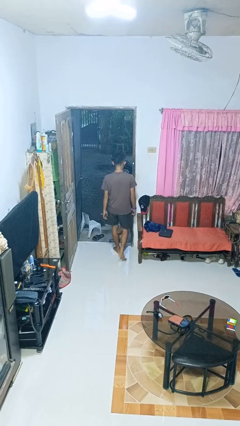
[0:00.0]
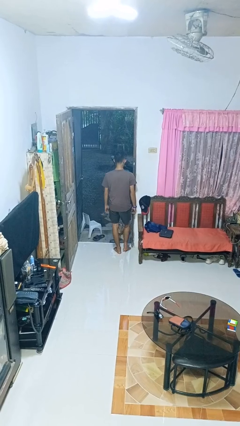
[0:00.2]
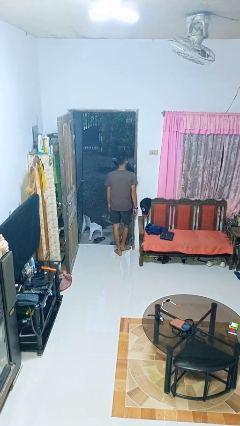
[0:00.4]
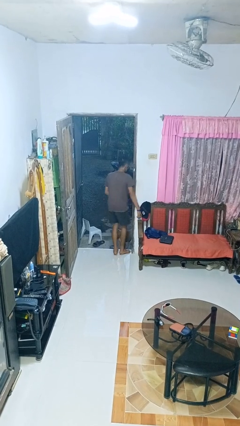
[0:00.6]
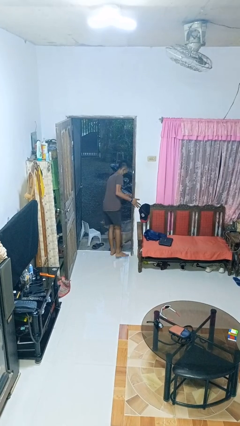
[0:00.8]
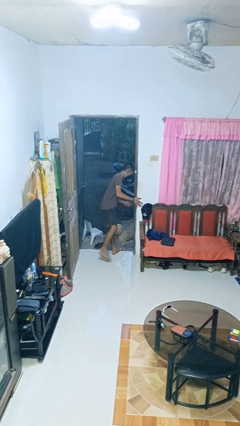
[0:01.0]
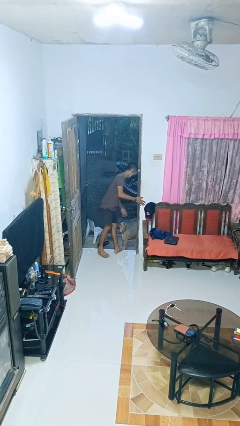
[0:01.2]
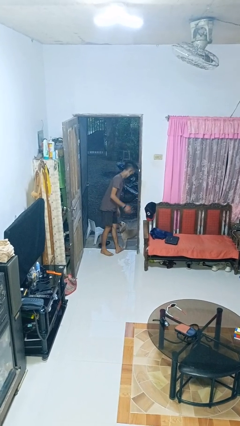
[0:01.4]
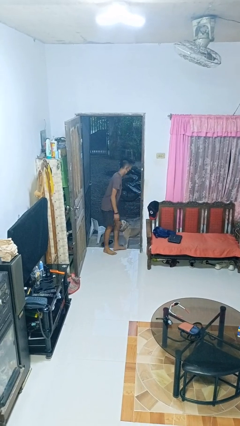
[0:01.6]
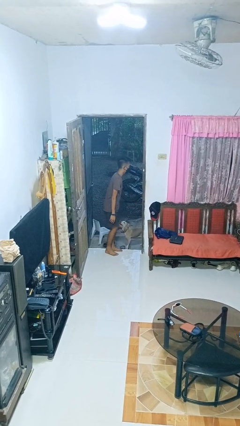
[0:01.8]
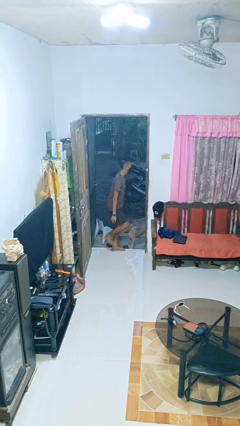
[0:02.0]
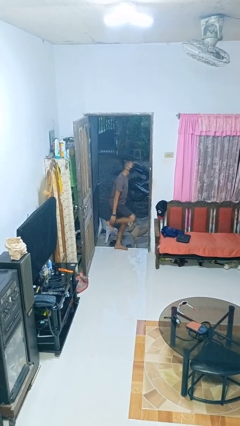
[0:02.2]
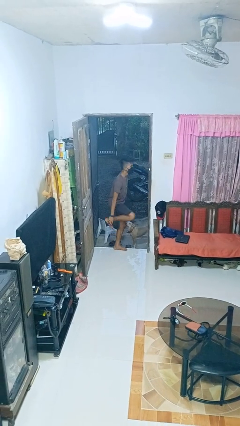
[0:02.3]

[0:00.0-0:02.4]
person bumps into wall

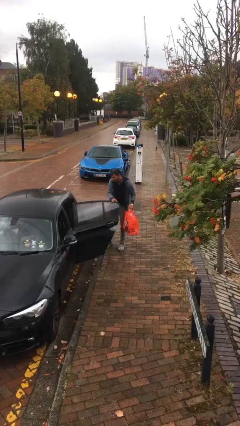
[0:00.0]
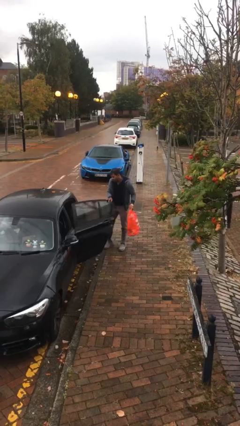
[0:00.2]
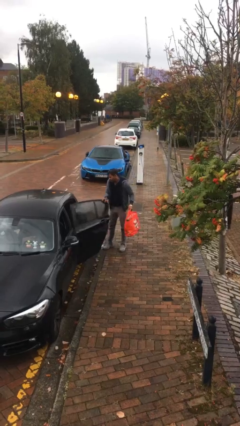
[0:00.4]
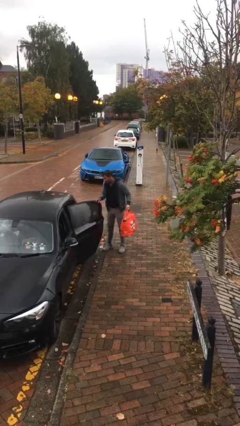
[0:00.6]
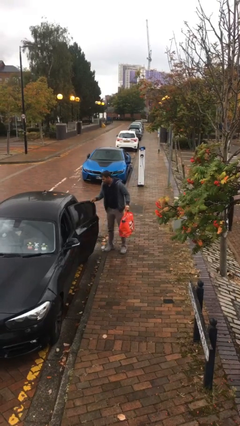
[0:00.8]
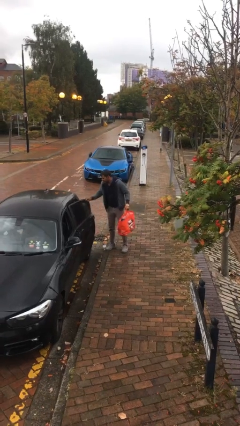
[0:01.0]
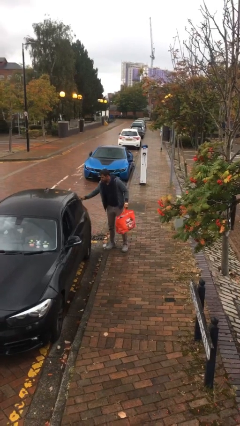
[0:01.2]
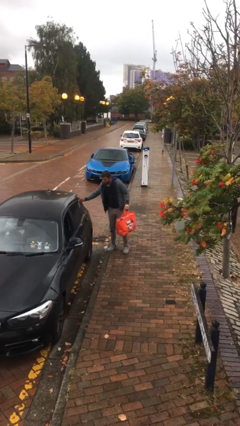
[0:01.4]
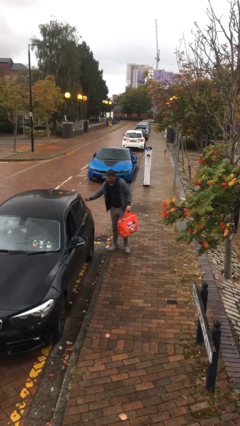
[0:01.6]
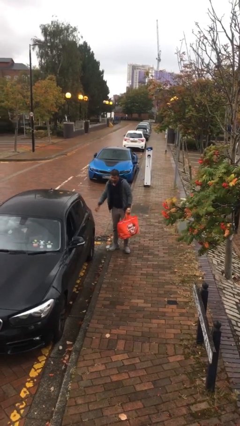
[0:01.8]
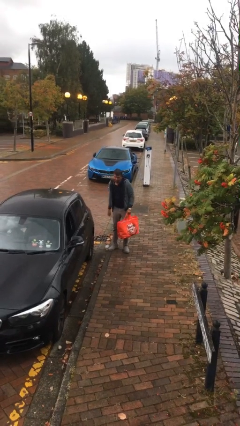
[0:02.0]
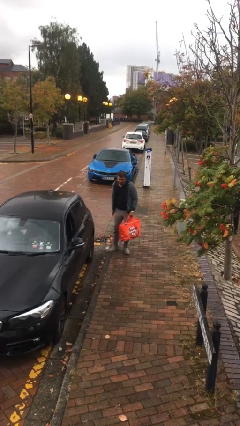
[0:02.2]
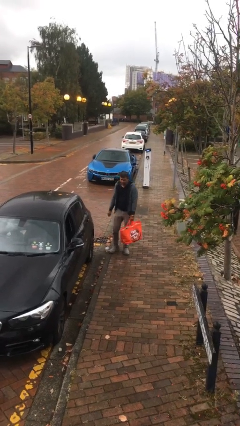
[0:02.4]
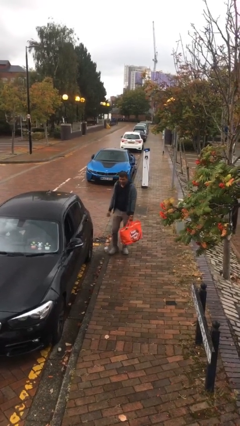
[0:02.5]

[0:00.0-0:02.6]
person closes car door

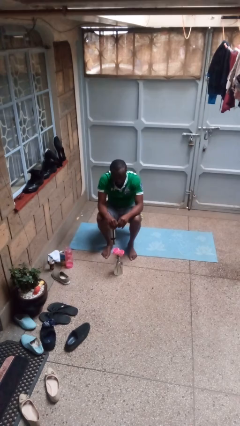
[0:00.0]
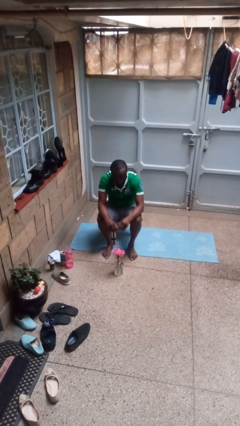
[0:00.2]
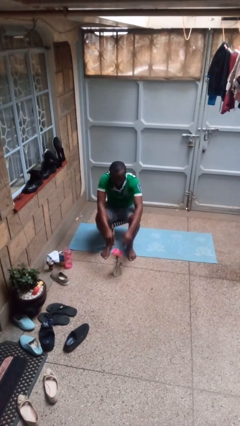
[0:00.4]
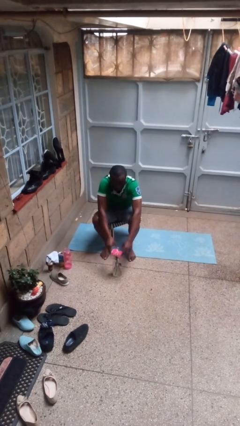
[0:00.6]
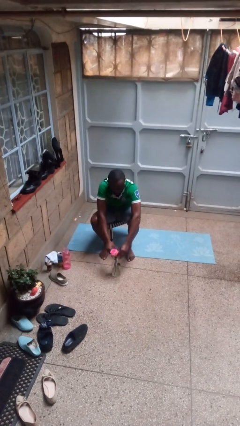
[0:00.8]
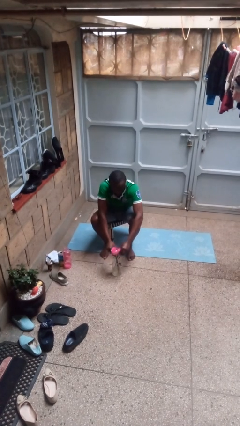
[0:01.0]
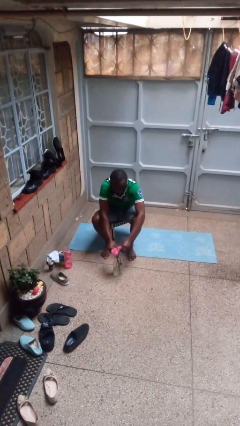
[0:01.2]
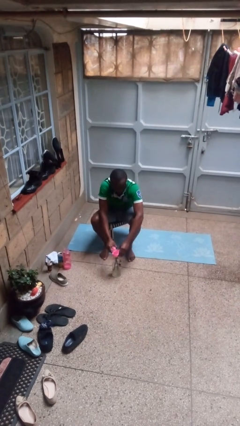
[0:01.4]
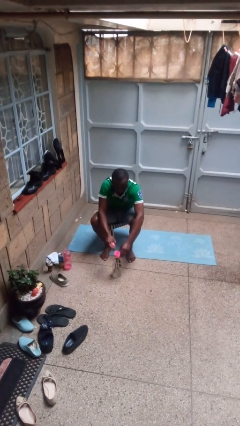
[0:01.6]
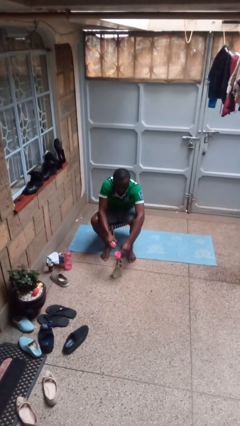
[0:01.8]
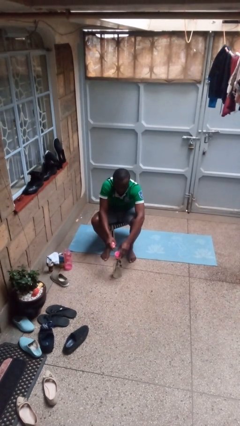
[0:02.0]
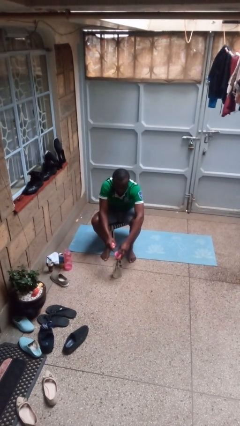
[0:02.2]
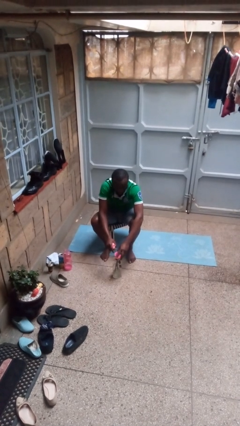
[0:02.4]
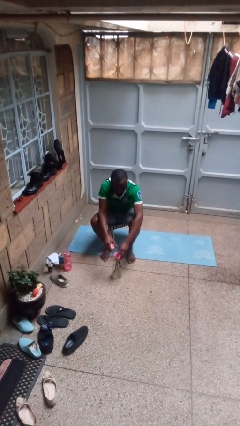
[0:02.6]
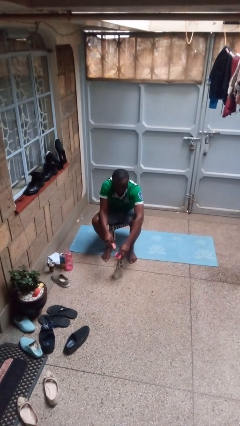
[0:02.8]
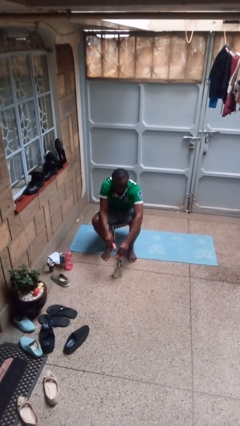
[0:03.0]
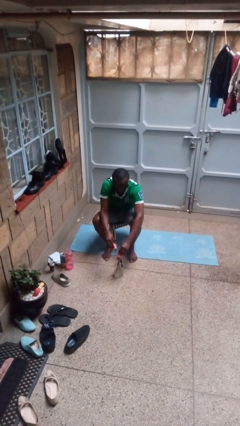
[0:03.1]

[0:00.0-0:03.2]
person arranges flowers in vase

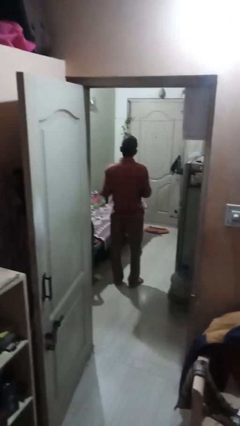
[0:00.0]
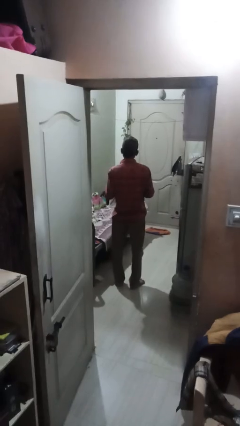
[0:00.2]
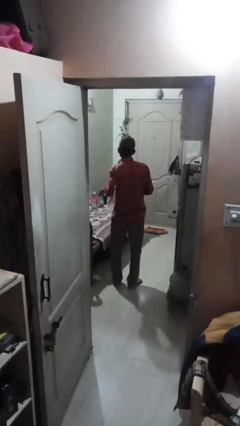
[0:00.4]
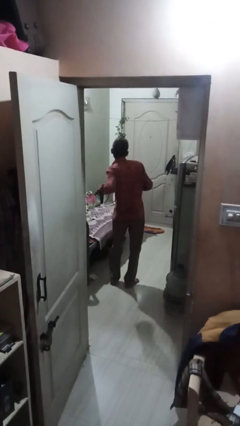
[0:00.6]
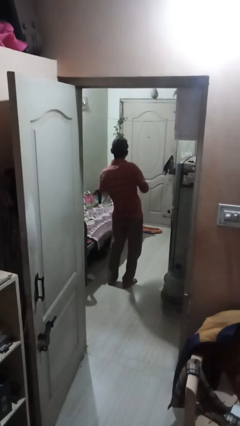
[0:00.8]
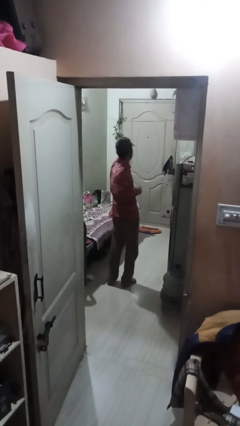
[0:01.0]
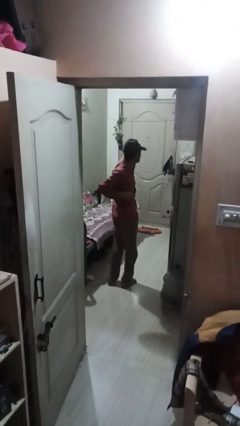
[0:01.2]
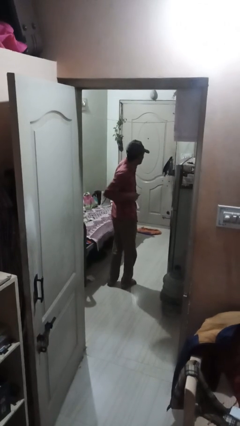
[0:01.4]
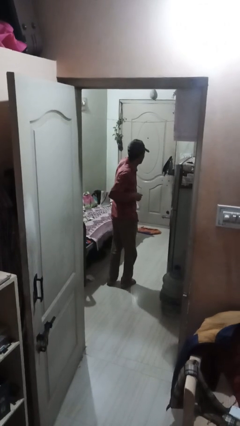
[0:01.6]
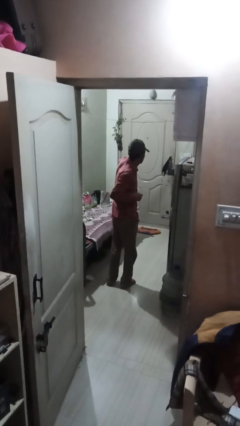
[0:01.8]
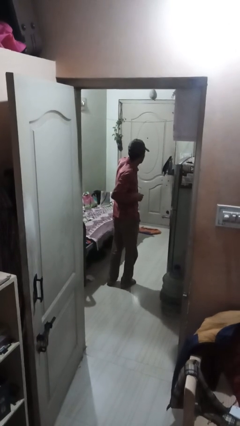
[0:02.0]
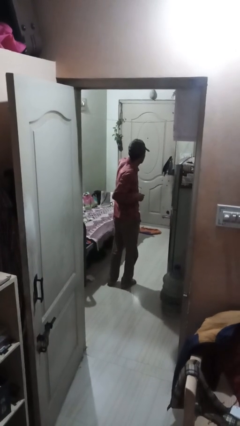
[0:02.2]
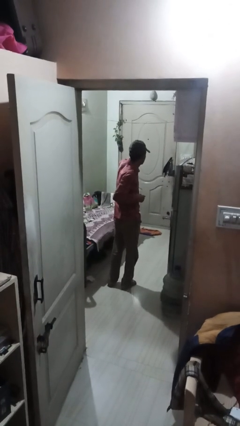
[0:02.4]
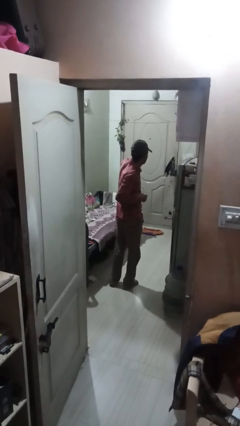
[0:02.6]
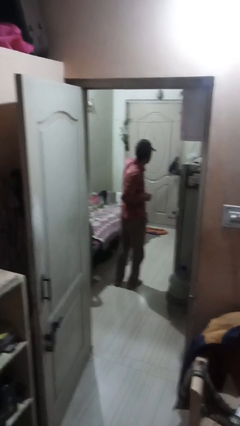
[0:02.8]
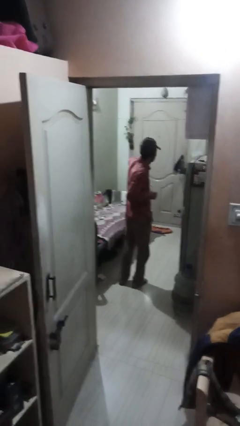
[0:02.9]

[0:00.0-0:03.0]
person punches

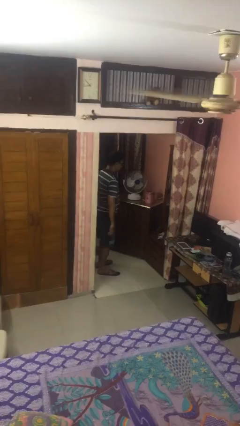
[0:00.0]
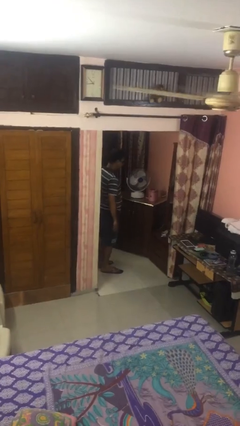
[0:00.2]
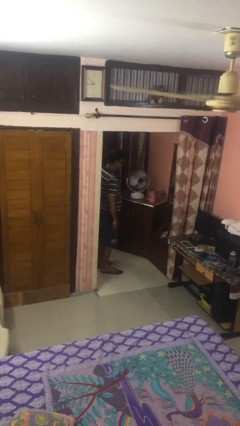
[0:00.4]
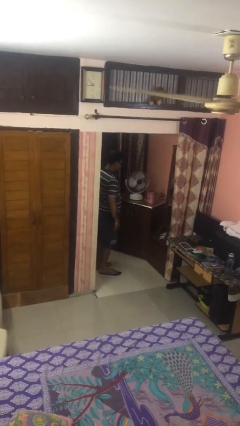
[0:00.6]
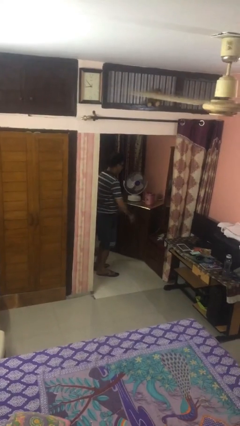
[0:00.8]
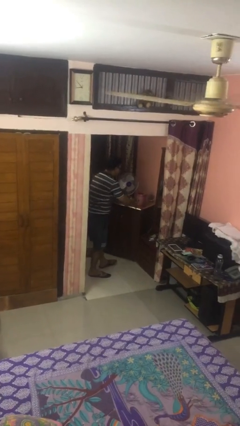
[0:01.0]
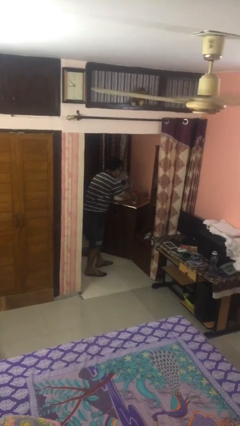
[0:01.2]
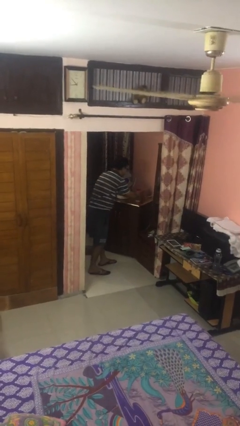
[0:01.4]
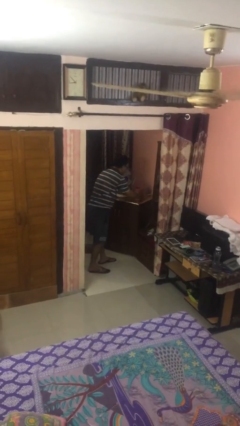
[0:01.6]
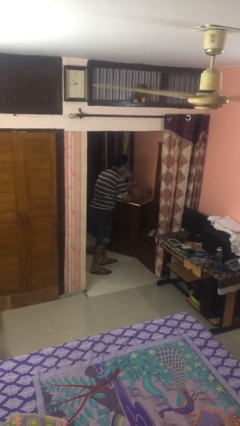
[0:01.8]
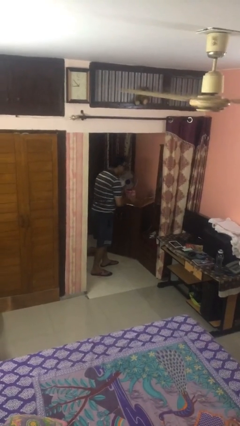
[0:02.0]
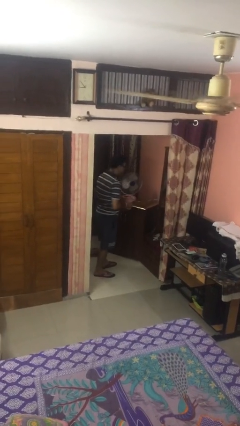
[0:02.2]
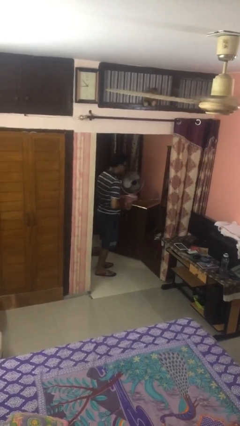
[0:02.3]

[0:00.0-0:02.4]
person picks up object from countertop

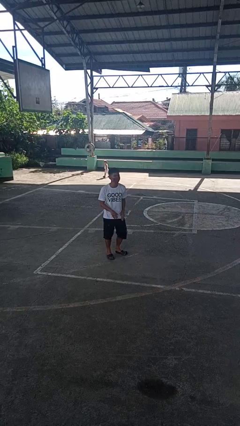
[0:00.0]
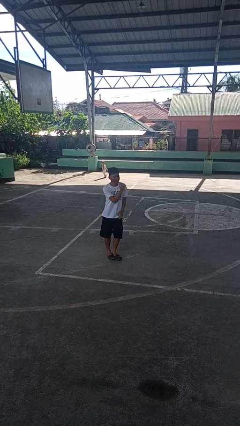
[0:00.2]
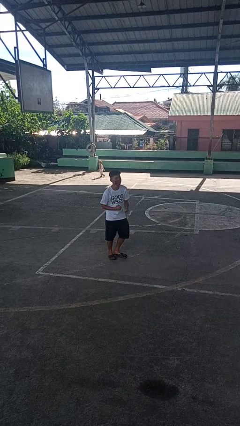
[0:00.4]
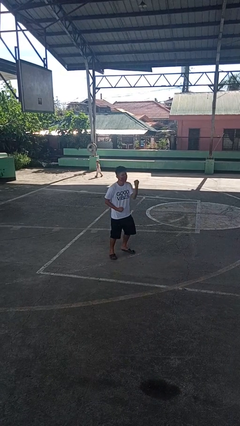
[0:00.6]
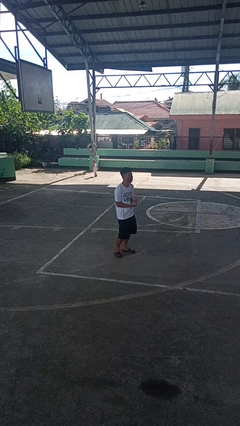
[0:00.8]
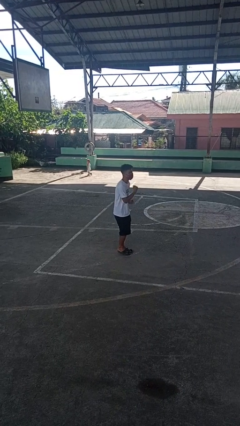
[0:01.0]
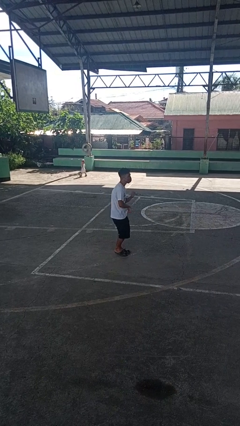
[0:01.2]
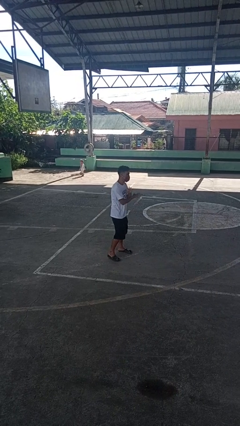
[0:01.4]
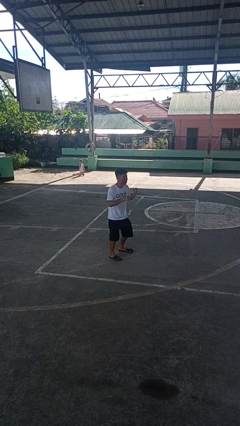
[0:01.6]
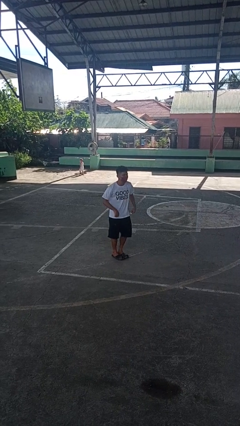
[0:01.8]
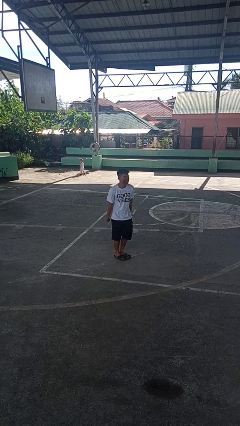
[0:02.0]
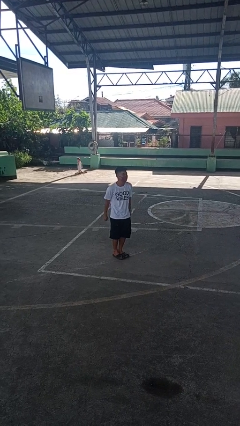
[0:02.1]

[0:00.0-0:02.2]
person dances in place

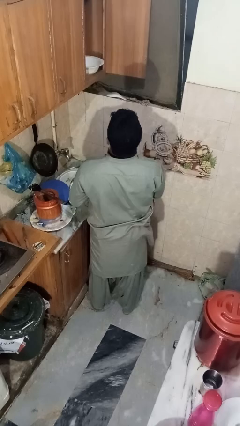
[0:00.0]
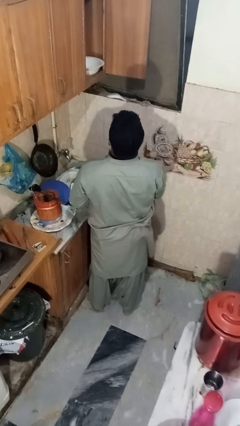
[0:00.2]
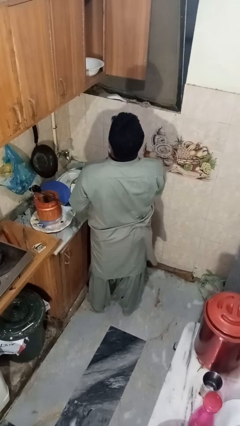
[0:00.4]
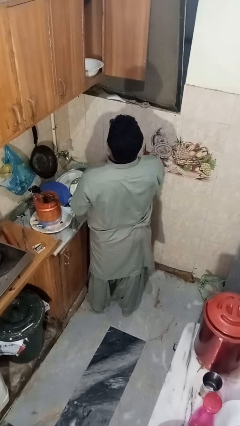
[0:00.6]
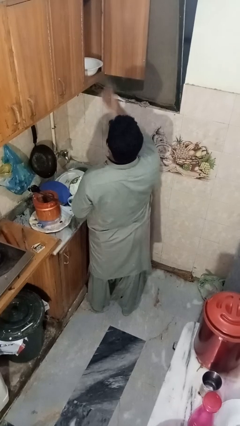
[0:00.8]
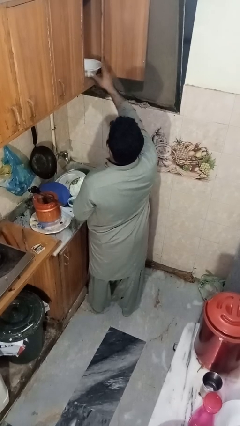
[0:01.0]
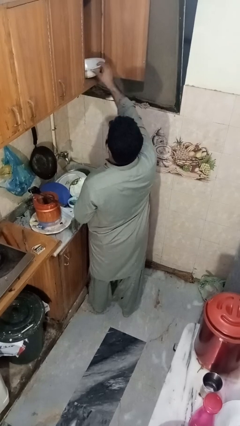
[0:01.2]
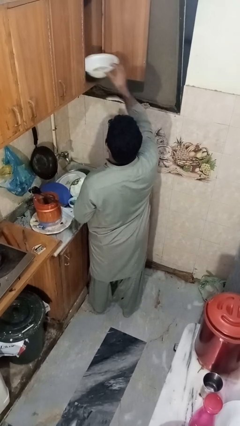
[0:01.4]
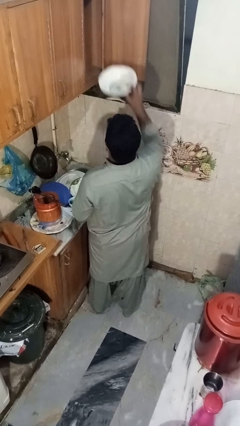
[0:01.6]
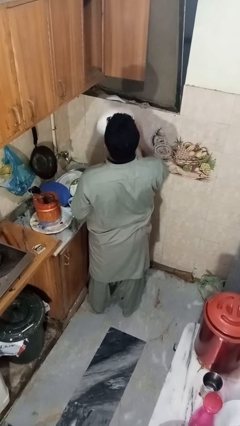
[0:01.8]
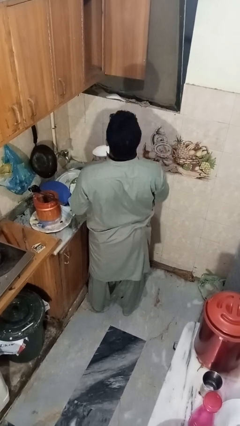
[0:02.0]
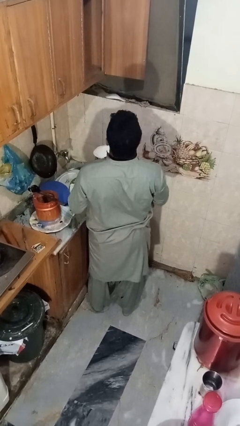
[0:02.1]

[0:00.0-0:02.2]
person takes object from cabinet
